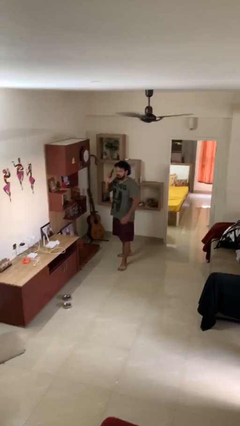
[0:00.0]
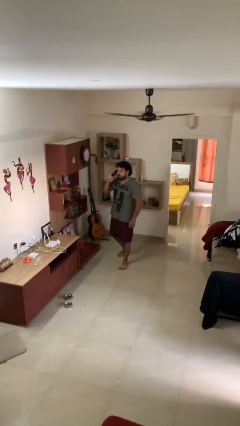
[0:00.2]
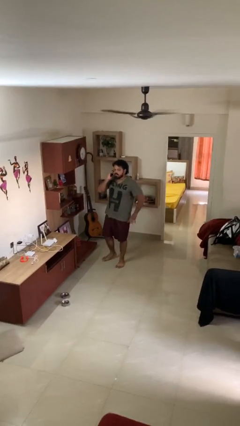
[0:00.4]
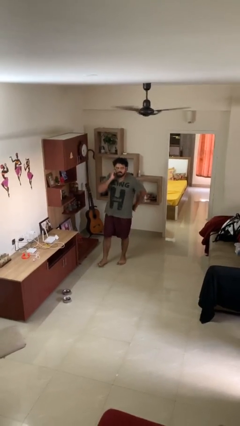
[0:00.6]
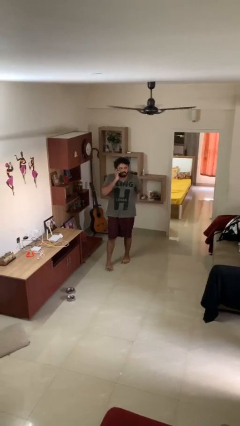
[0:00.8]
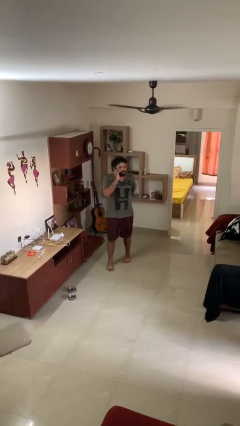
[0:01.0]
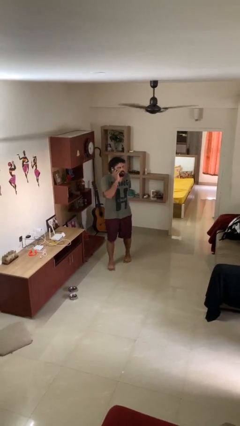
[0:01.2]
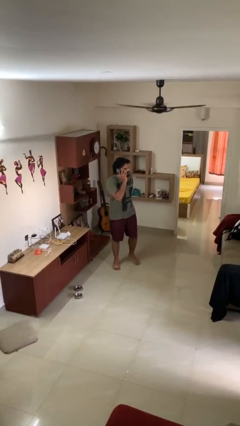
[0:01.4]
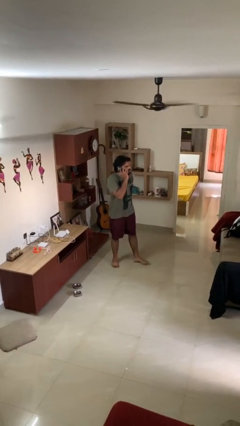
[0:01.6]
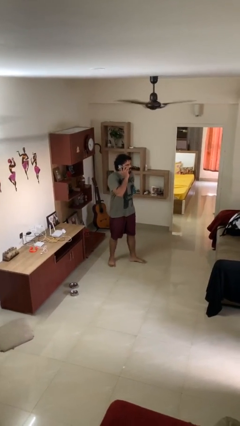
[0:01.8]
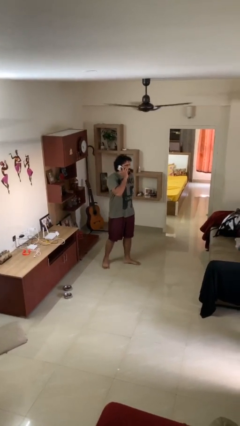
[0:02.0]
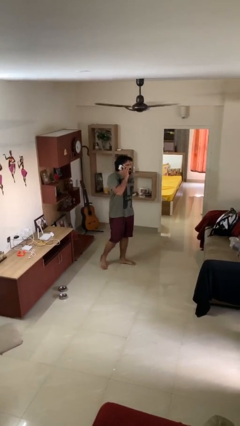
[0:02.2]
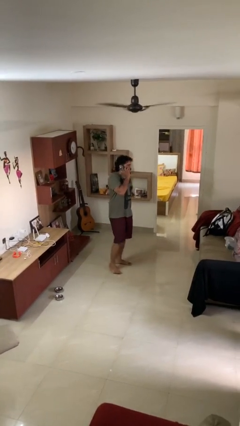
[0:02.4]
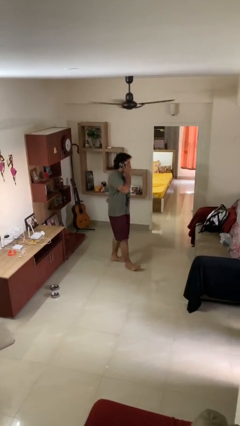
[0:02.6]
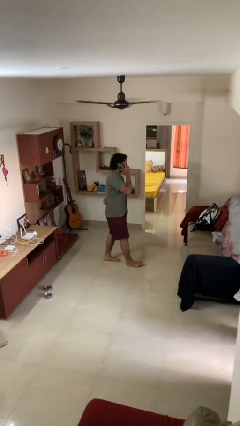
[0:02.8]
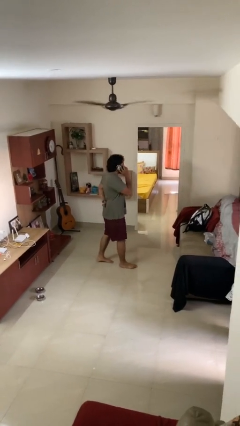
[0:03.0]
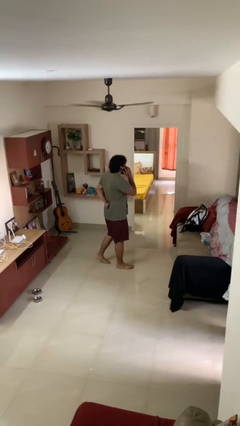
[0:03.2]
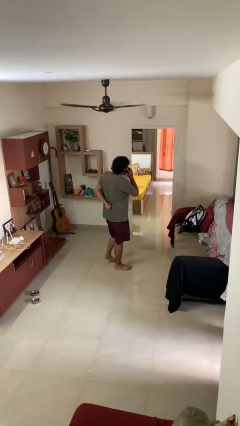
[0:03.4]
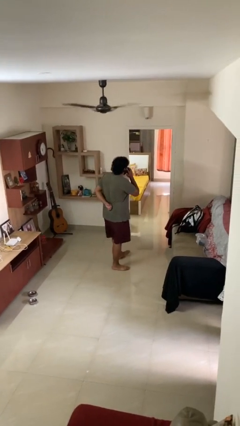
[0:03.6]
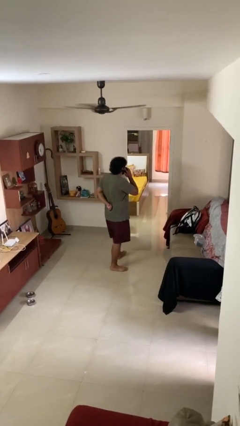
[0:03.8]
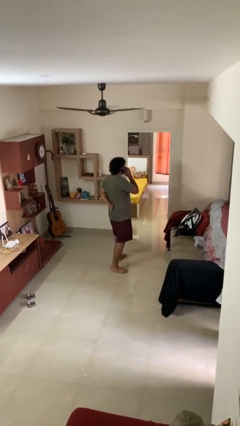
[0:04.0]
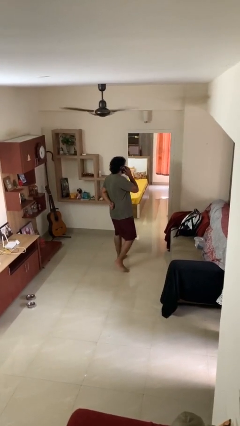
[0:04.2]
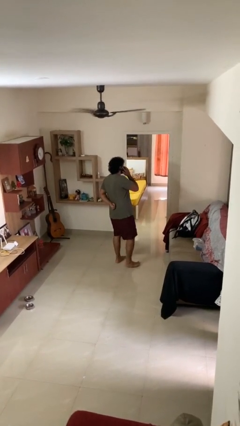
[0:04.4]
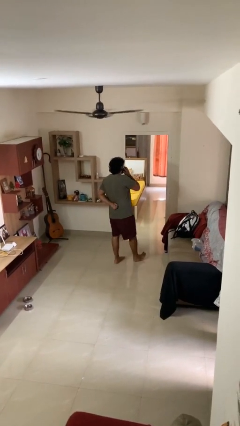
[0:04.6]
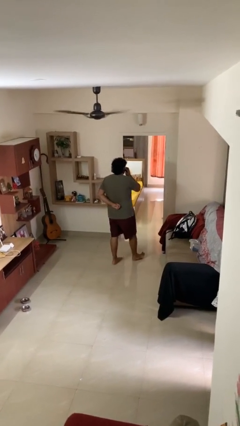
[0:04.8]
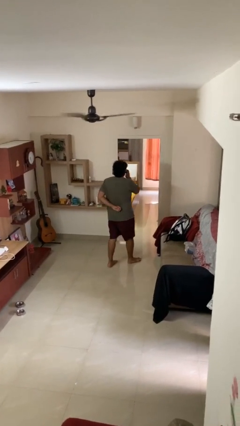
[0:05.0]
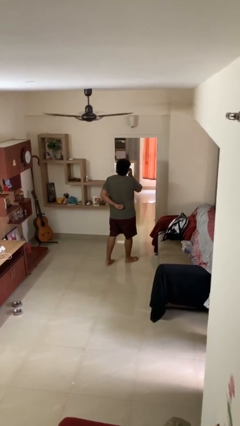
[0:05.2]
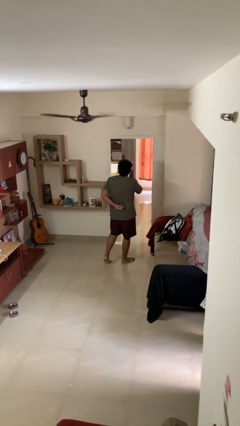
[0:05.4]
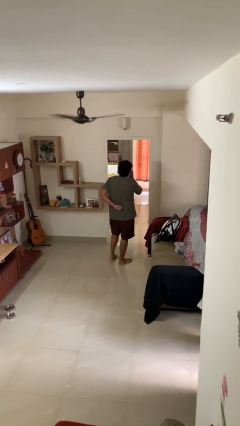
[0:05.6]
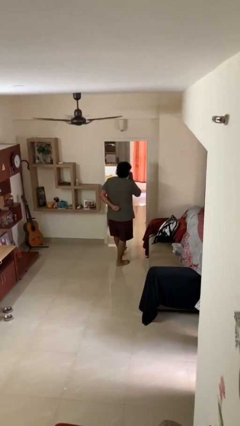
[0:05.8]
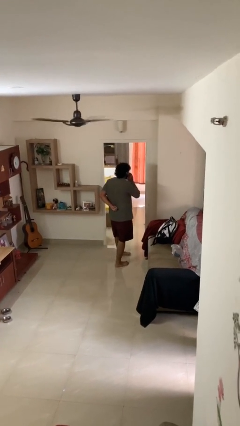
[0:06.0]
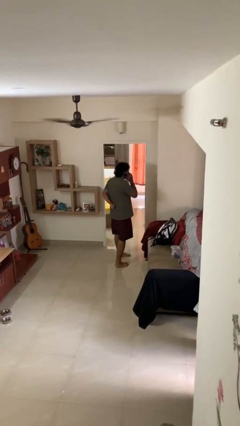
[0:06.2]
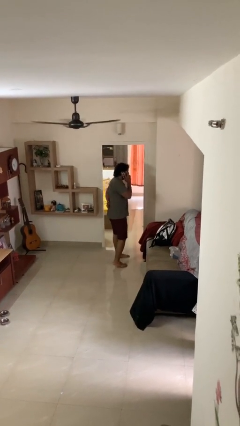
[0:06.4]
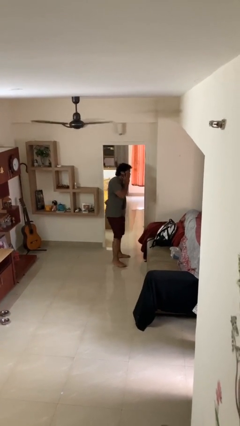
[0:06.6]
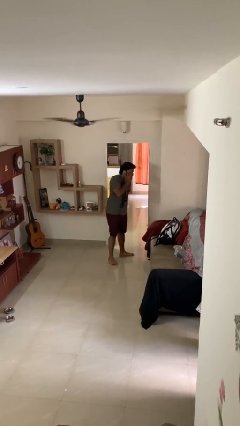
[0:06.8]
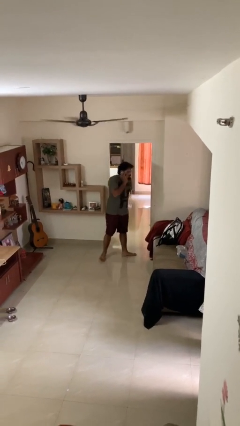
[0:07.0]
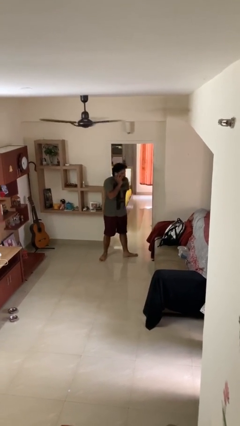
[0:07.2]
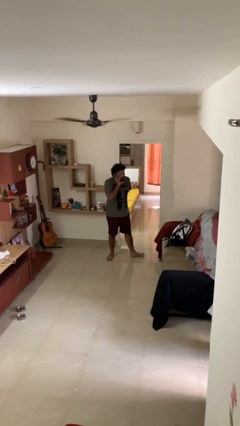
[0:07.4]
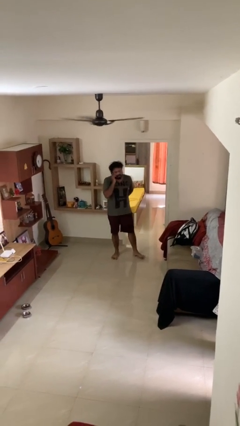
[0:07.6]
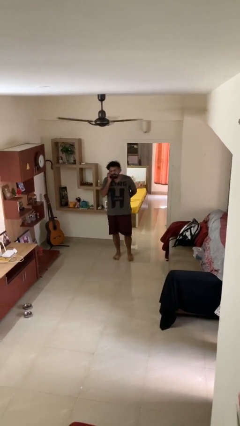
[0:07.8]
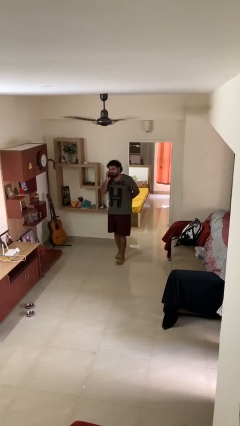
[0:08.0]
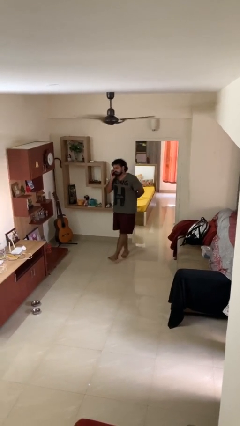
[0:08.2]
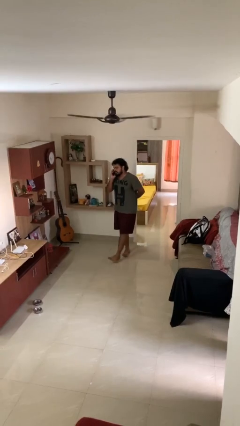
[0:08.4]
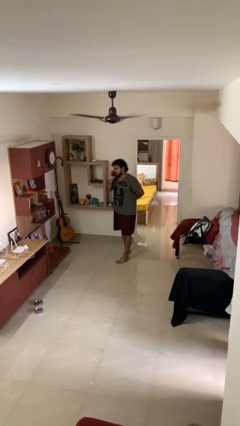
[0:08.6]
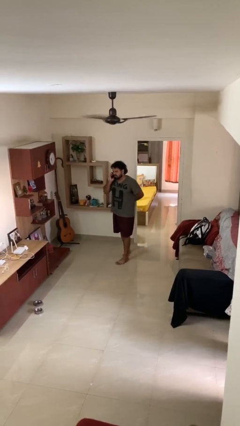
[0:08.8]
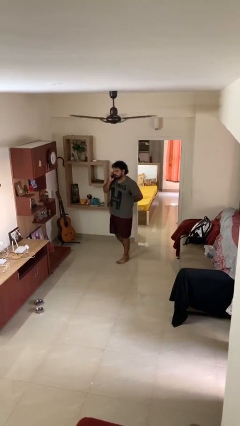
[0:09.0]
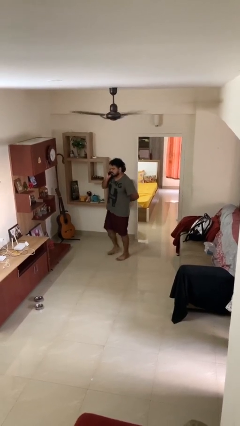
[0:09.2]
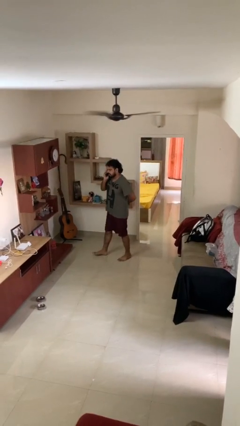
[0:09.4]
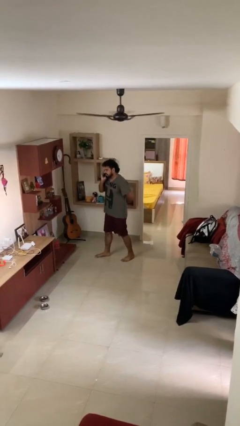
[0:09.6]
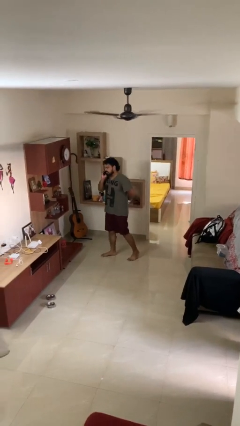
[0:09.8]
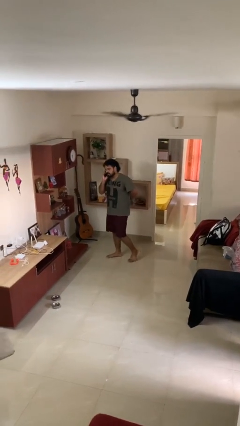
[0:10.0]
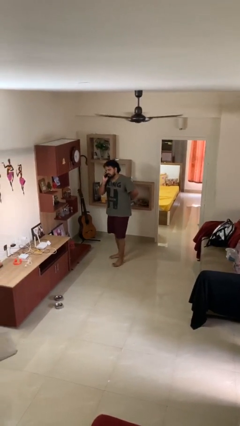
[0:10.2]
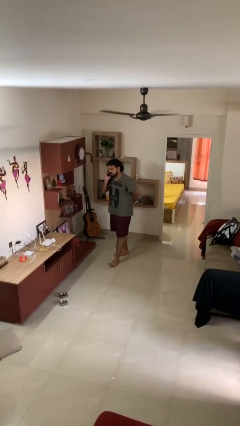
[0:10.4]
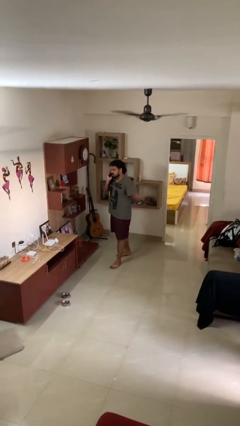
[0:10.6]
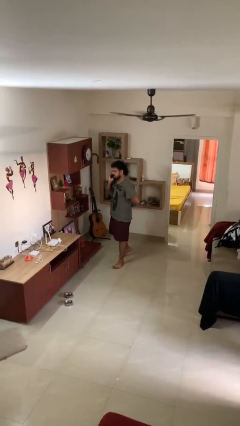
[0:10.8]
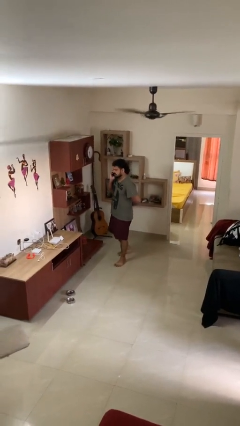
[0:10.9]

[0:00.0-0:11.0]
person talks on phone

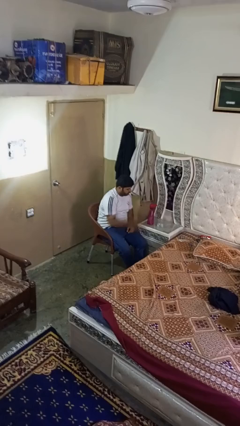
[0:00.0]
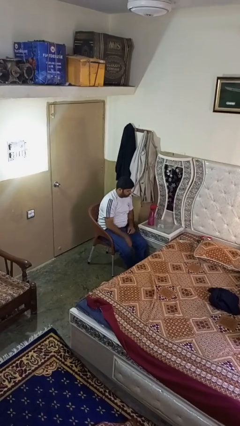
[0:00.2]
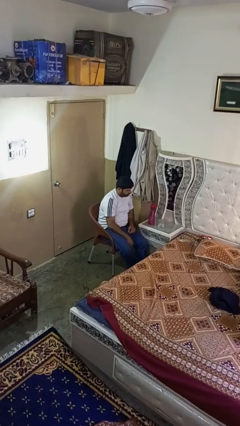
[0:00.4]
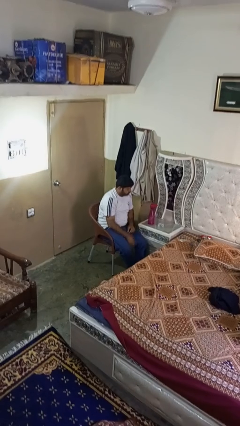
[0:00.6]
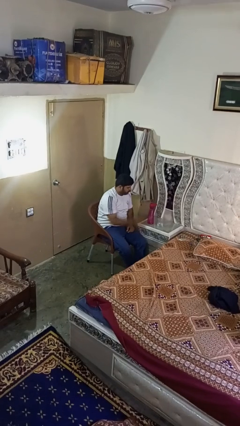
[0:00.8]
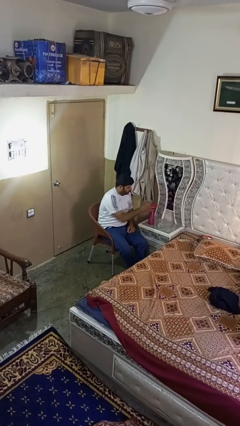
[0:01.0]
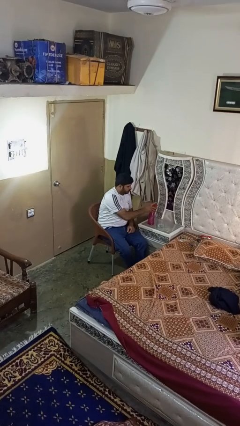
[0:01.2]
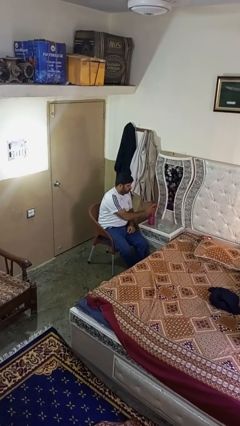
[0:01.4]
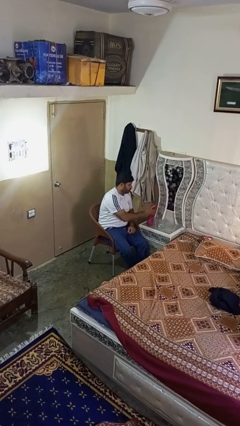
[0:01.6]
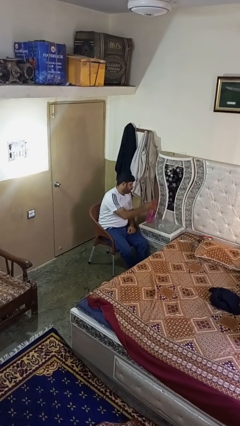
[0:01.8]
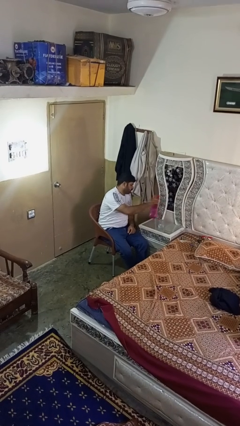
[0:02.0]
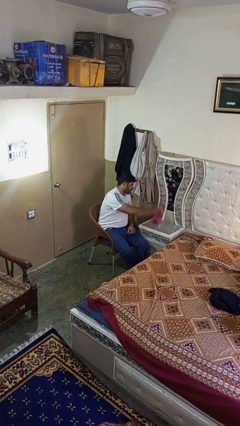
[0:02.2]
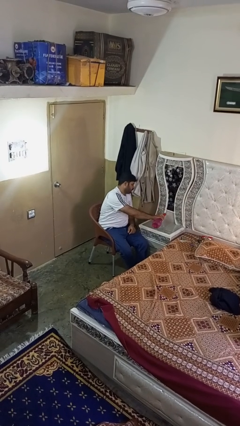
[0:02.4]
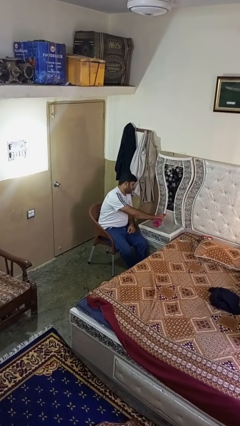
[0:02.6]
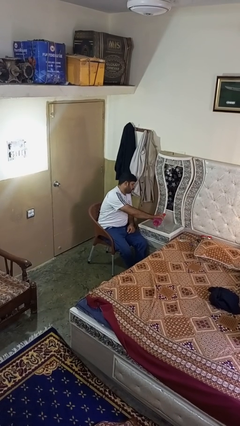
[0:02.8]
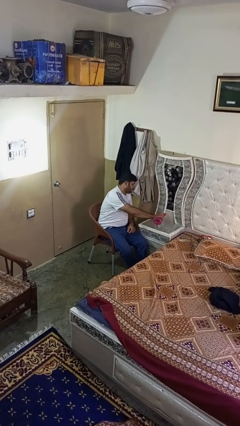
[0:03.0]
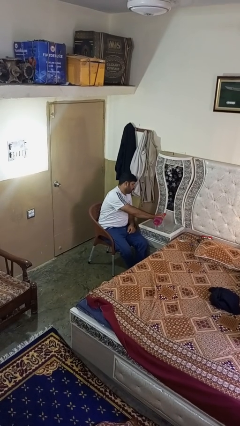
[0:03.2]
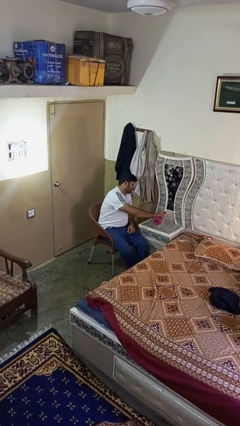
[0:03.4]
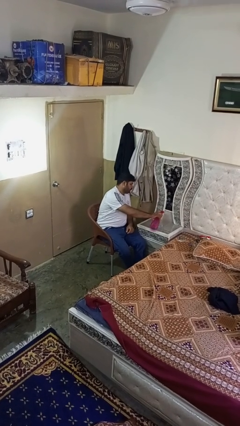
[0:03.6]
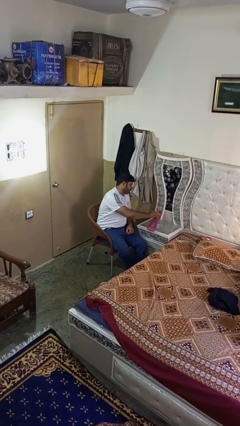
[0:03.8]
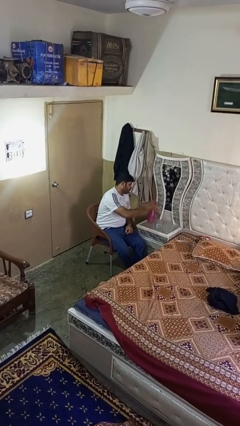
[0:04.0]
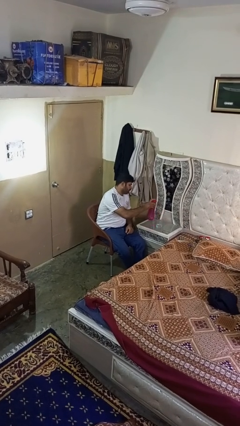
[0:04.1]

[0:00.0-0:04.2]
person pours liquid into cup

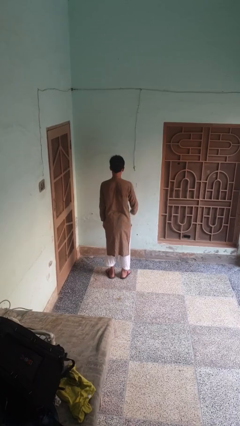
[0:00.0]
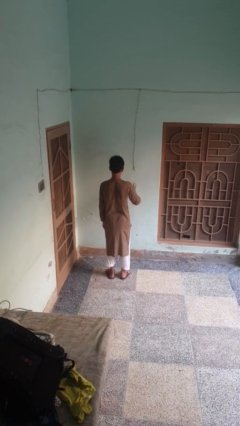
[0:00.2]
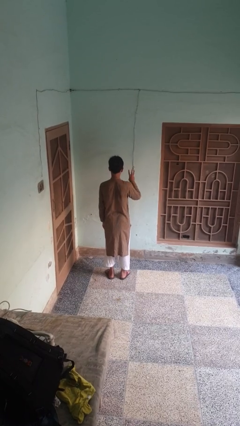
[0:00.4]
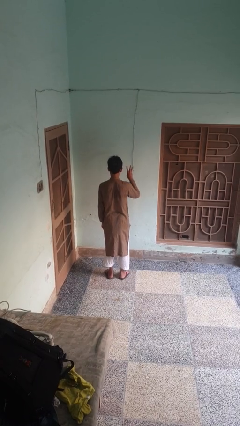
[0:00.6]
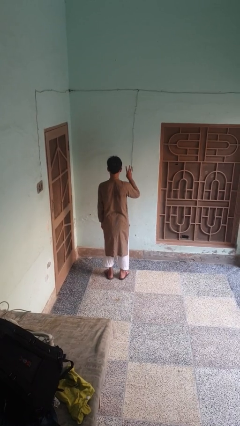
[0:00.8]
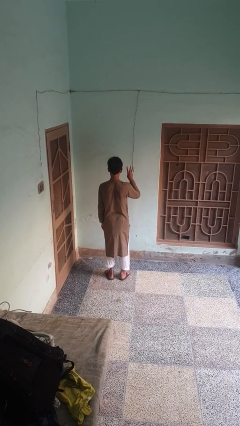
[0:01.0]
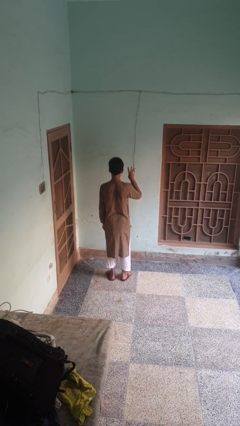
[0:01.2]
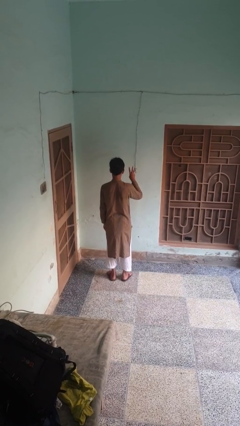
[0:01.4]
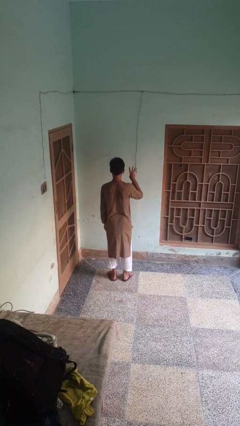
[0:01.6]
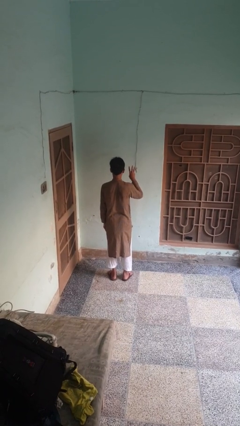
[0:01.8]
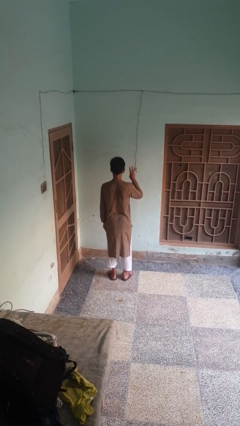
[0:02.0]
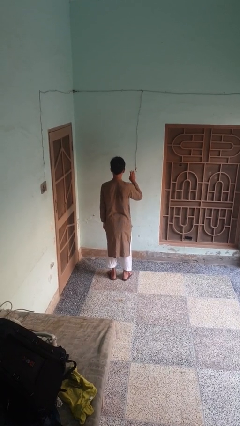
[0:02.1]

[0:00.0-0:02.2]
person gestures number three

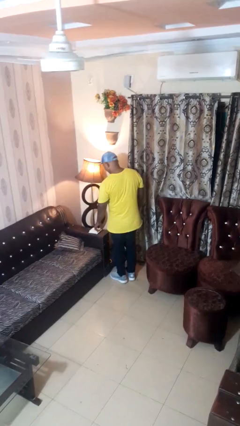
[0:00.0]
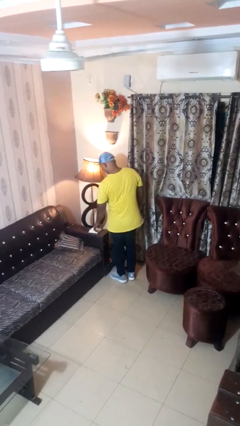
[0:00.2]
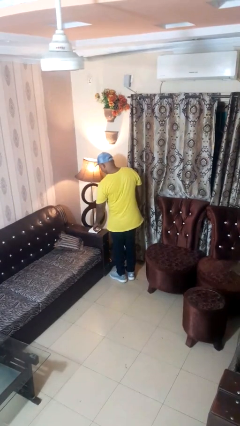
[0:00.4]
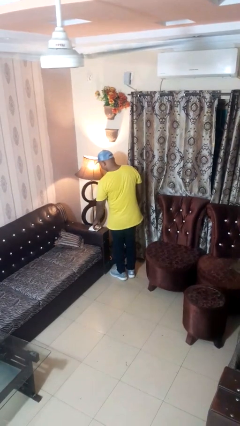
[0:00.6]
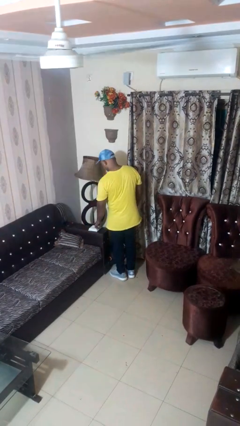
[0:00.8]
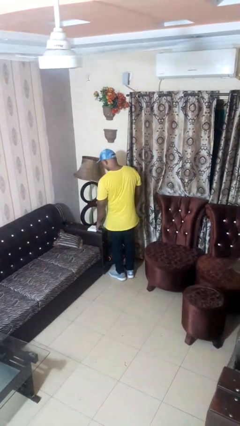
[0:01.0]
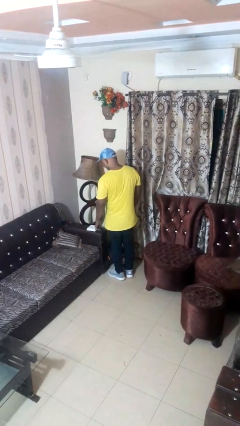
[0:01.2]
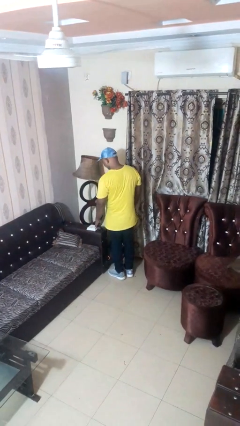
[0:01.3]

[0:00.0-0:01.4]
person turns off lamp
